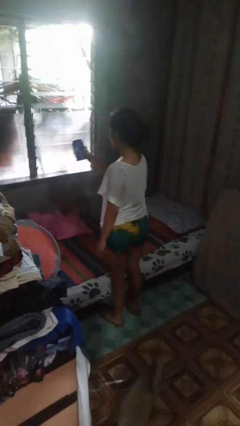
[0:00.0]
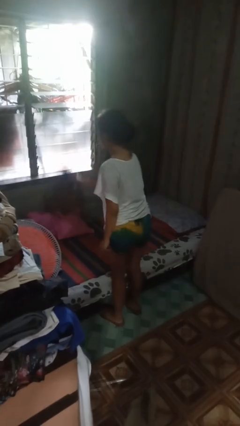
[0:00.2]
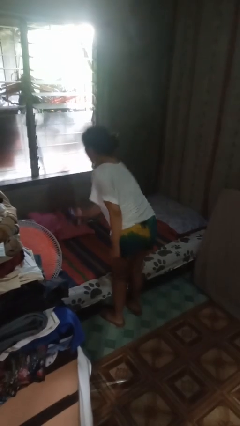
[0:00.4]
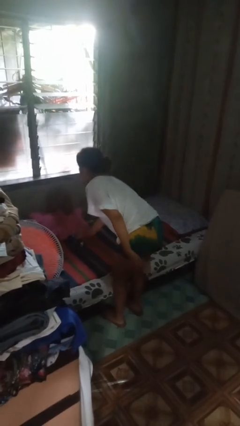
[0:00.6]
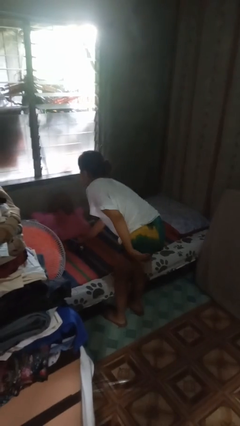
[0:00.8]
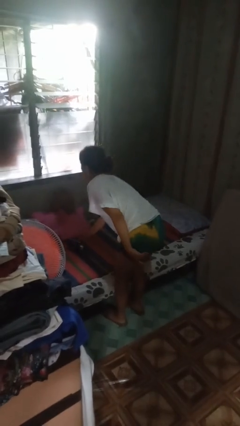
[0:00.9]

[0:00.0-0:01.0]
person puts down object on bed

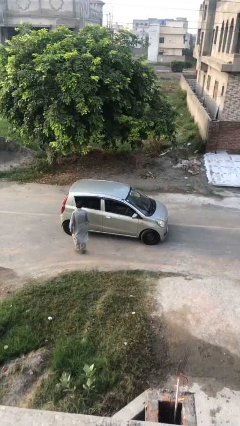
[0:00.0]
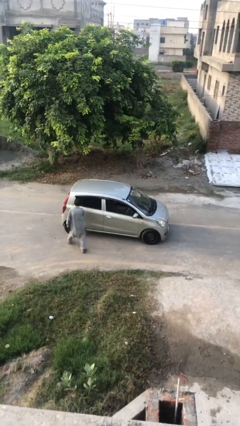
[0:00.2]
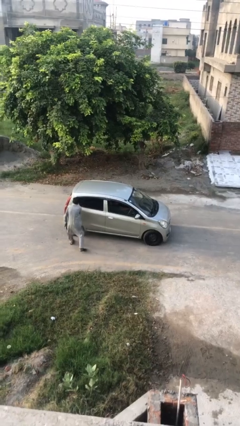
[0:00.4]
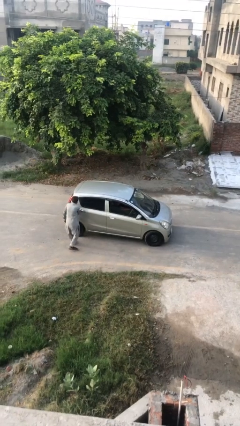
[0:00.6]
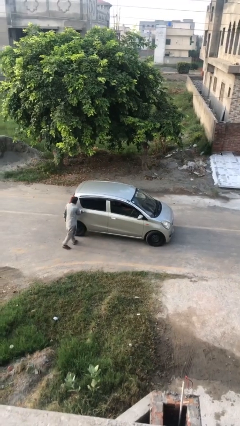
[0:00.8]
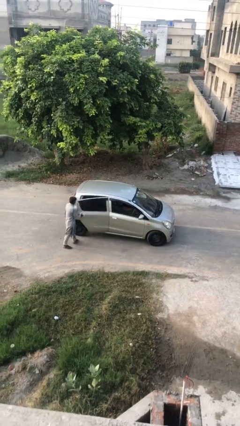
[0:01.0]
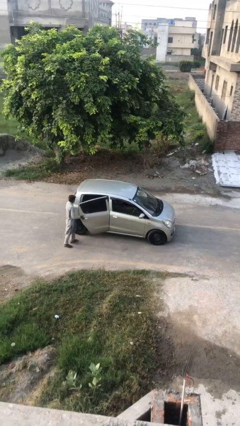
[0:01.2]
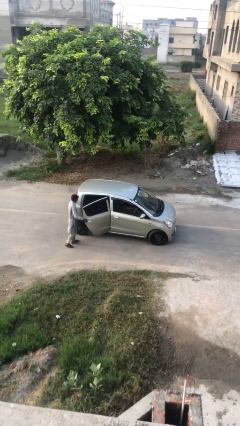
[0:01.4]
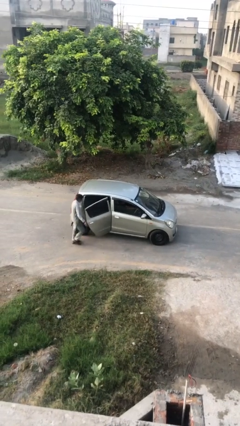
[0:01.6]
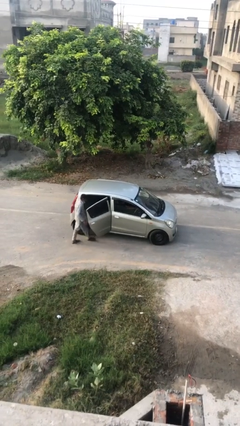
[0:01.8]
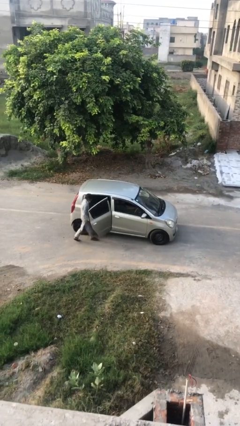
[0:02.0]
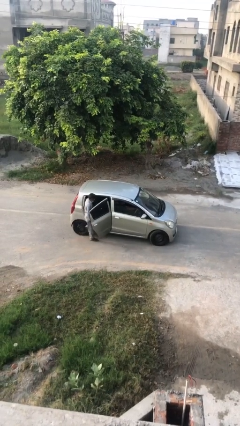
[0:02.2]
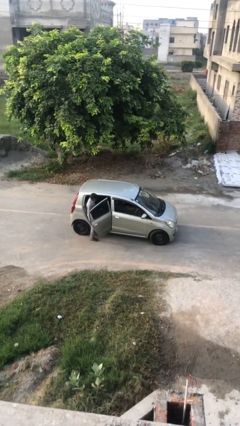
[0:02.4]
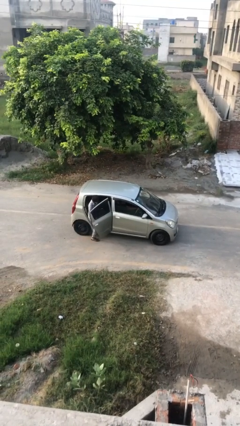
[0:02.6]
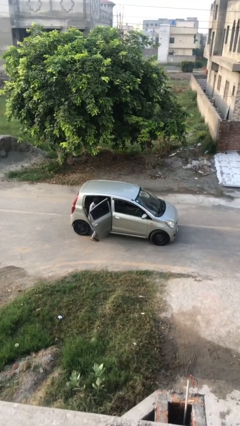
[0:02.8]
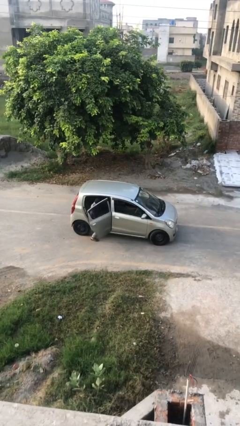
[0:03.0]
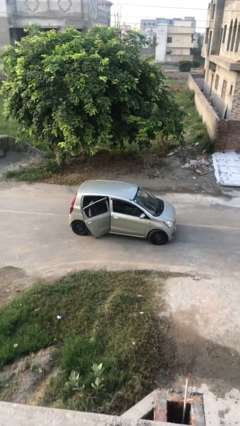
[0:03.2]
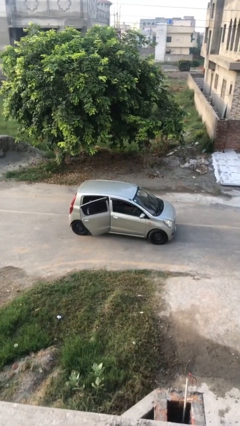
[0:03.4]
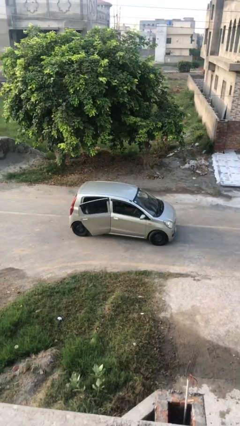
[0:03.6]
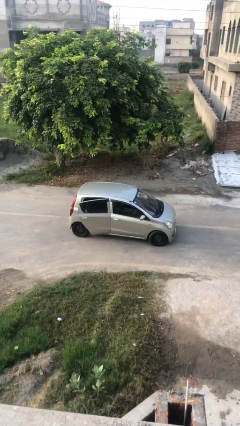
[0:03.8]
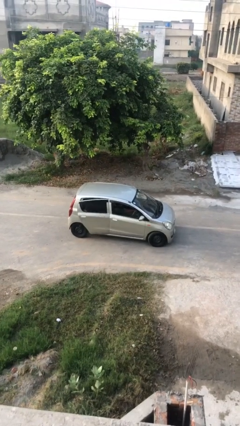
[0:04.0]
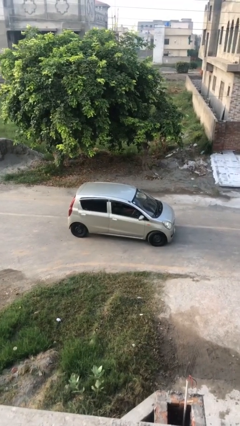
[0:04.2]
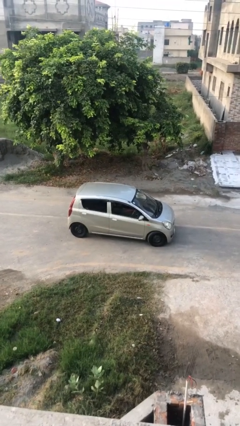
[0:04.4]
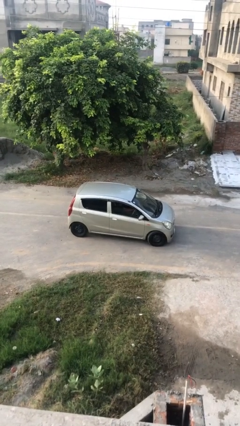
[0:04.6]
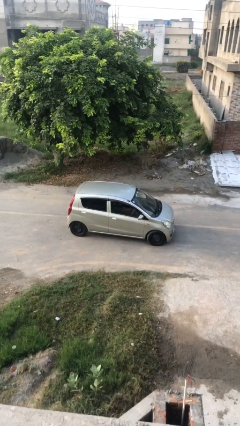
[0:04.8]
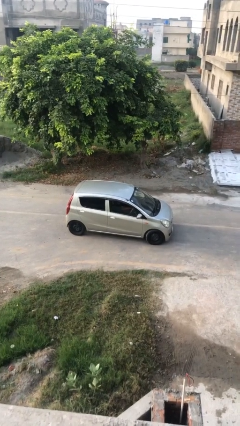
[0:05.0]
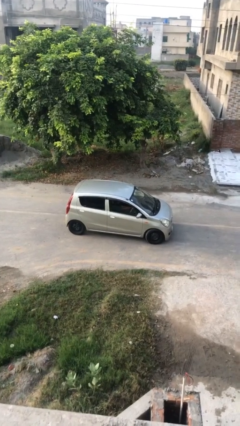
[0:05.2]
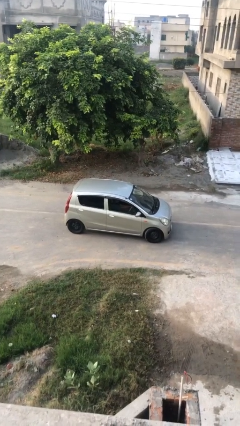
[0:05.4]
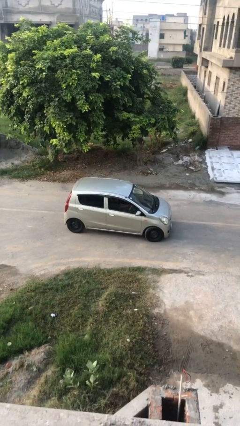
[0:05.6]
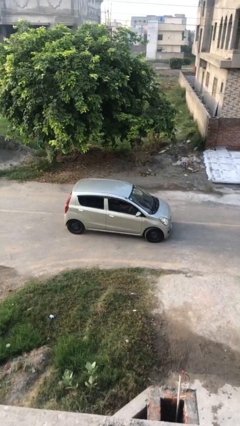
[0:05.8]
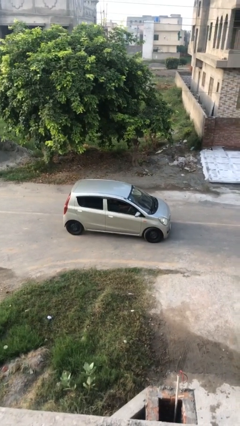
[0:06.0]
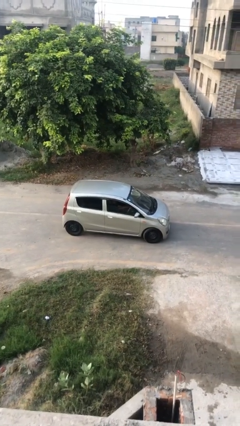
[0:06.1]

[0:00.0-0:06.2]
car picks up person

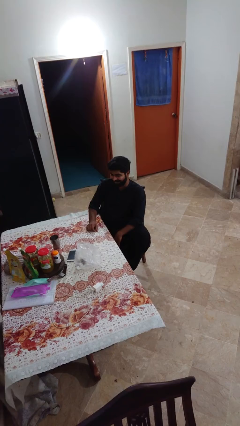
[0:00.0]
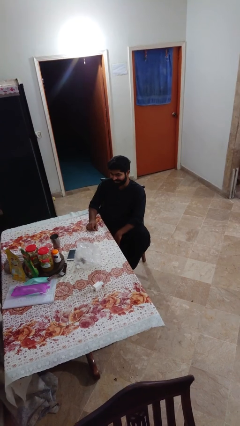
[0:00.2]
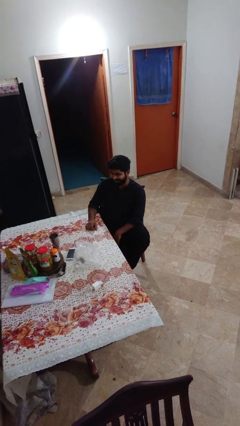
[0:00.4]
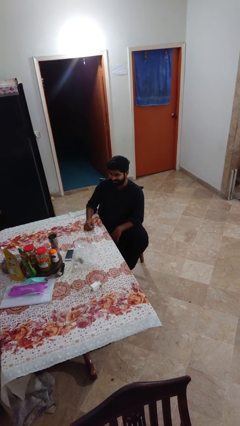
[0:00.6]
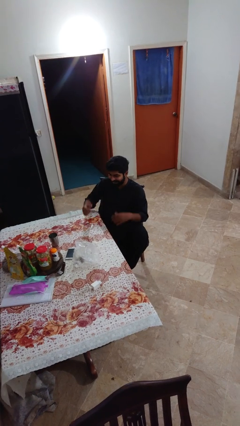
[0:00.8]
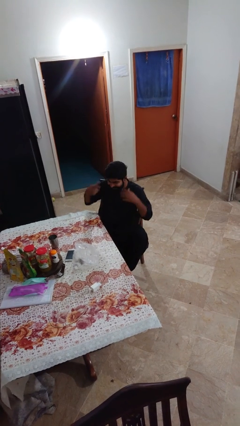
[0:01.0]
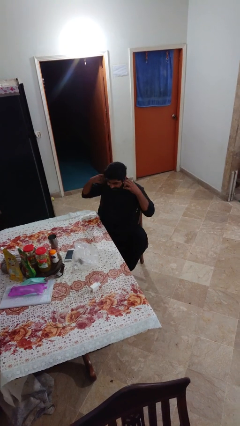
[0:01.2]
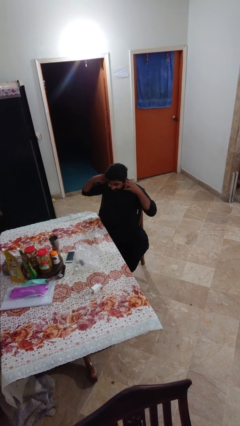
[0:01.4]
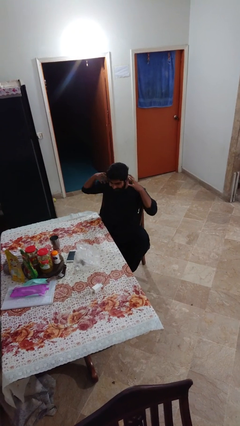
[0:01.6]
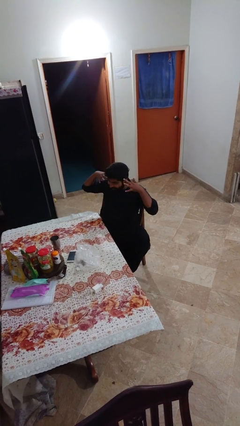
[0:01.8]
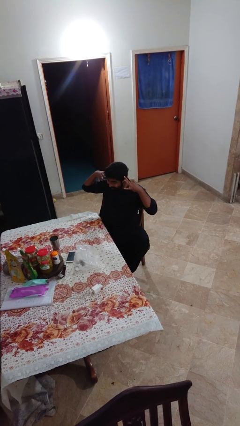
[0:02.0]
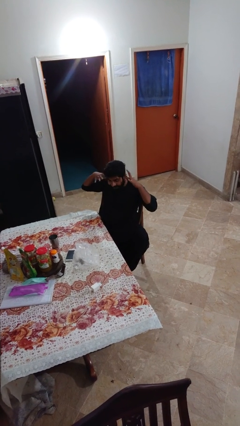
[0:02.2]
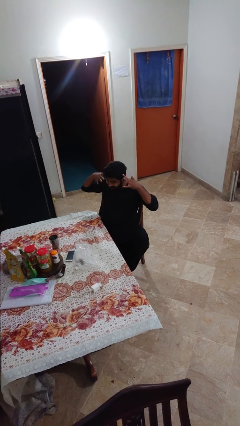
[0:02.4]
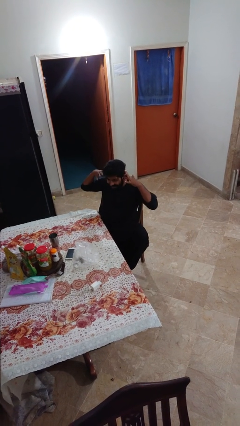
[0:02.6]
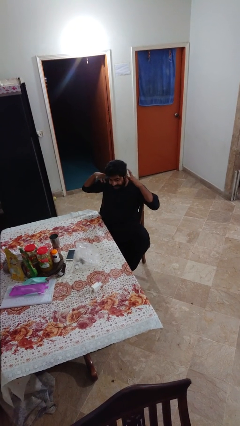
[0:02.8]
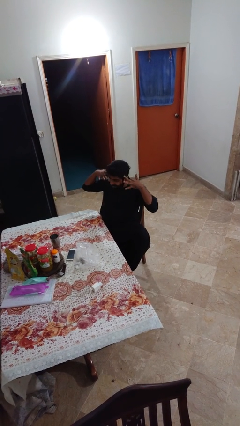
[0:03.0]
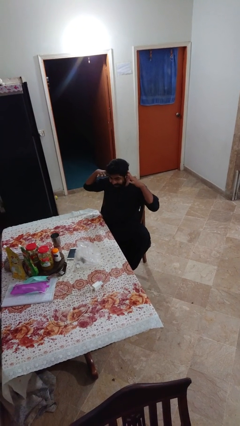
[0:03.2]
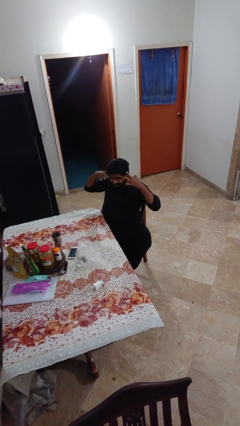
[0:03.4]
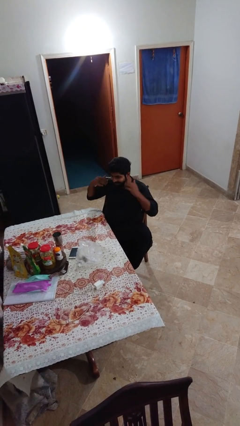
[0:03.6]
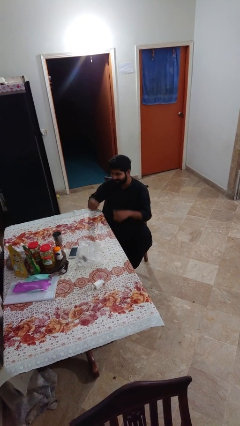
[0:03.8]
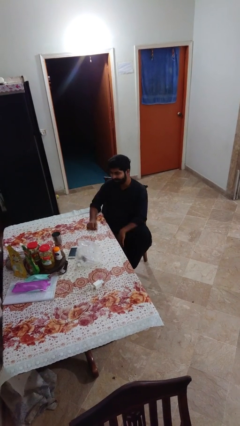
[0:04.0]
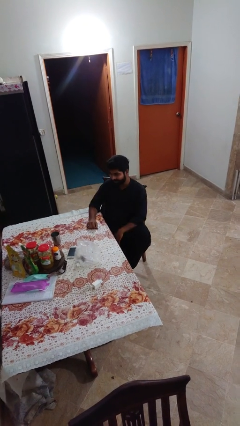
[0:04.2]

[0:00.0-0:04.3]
person puts fingers in ear

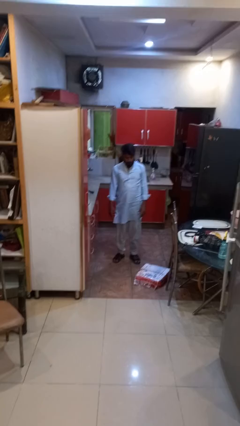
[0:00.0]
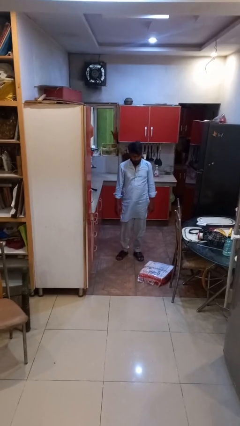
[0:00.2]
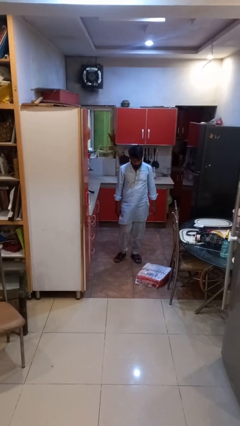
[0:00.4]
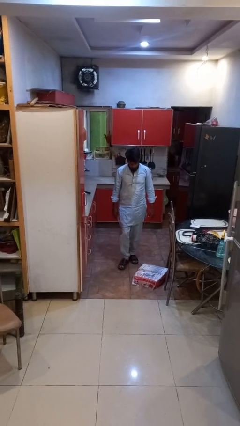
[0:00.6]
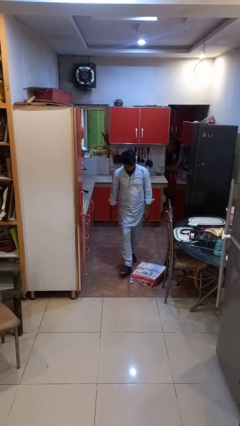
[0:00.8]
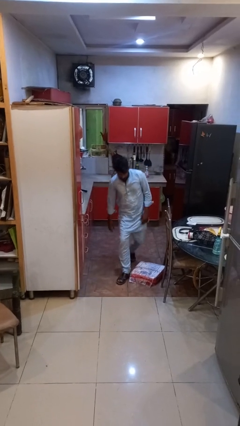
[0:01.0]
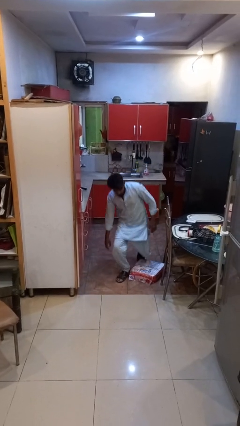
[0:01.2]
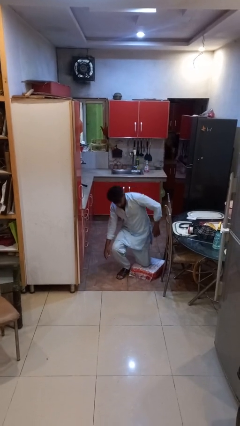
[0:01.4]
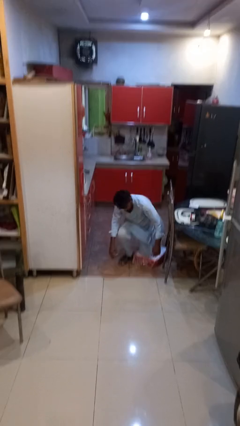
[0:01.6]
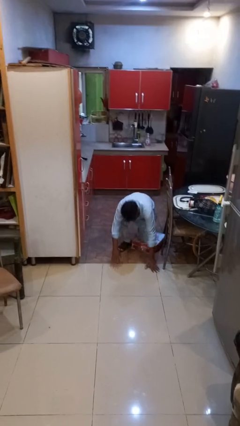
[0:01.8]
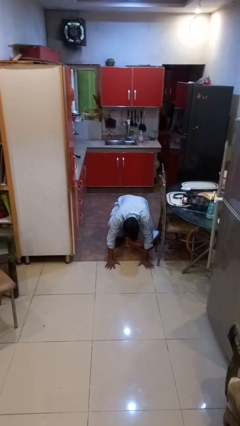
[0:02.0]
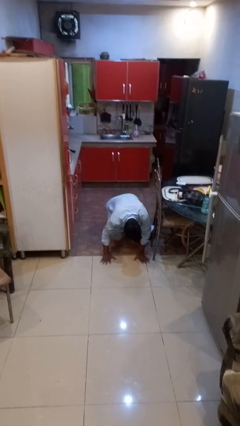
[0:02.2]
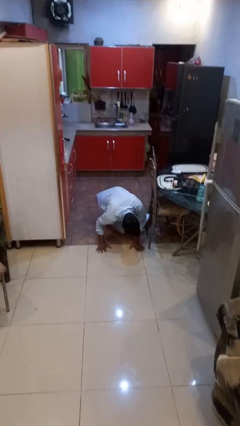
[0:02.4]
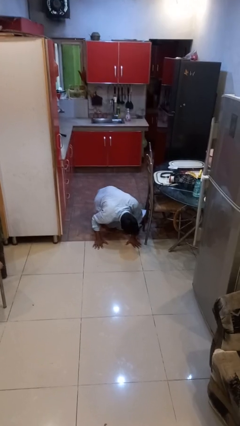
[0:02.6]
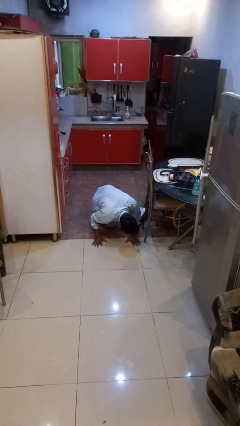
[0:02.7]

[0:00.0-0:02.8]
person trips on object on floor

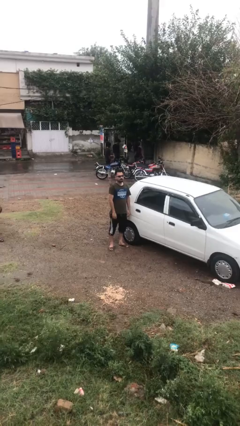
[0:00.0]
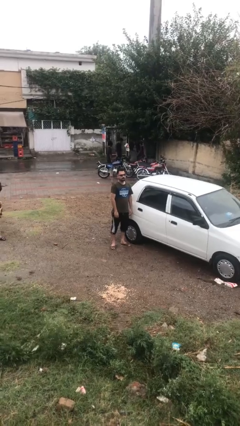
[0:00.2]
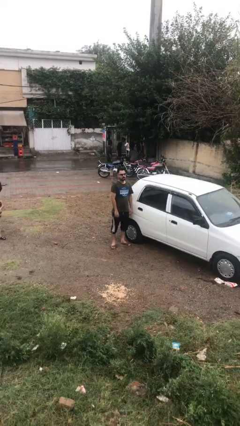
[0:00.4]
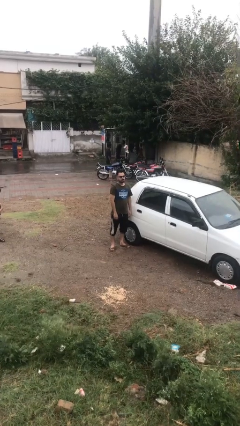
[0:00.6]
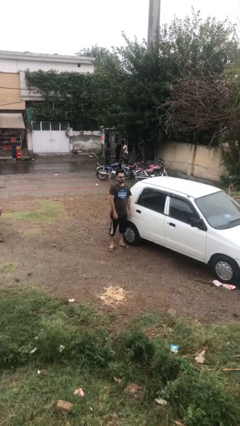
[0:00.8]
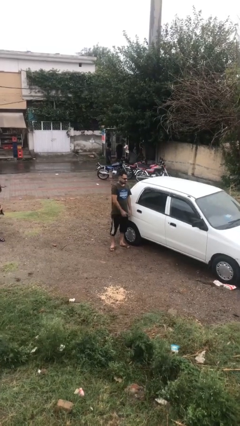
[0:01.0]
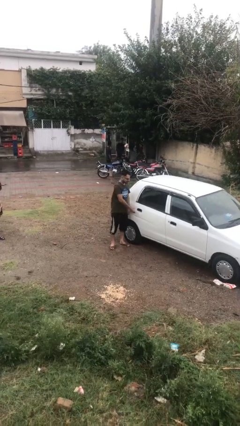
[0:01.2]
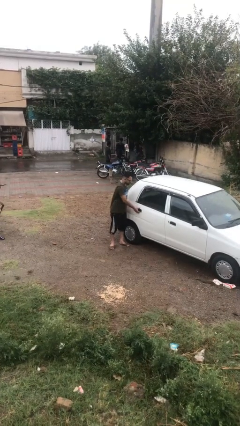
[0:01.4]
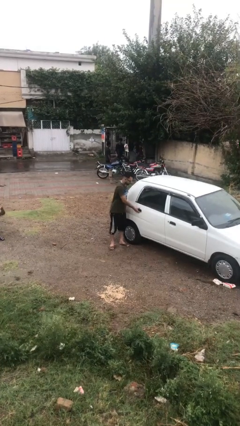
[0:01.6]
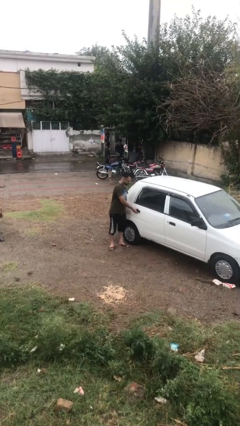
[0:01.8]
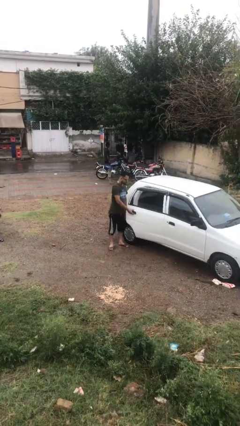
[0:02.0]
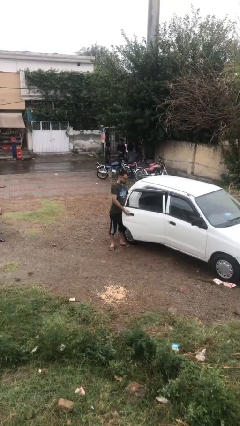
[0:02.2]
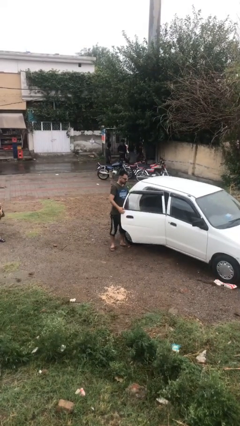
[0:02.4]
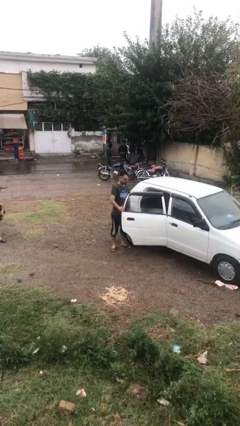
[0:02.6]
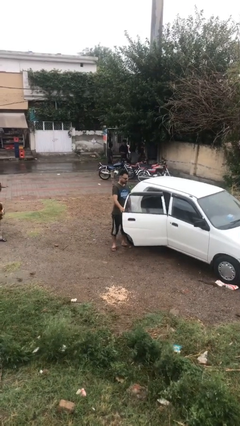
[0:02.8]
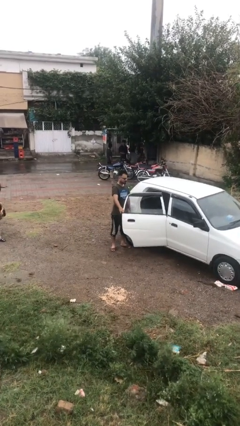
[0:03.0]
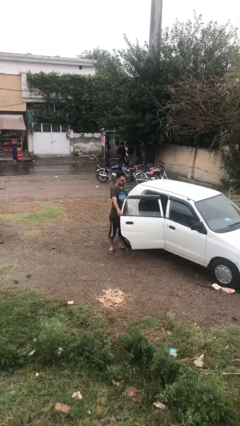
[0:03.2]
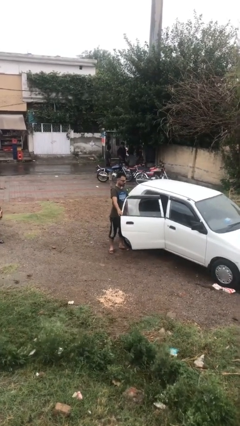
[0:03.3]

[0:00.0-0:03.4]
person opens car door

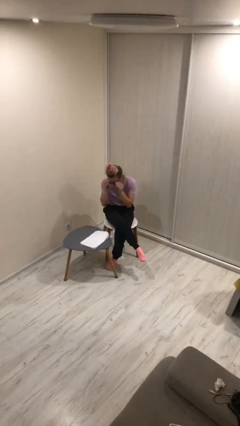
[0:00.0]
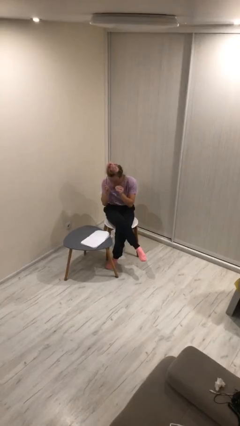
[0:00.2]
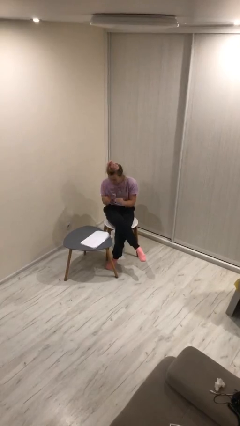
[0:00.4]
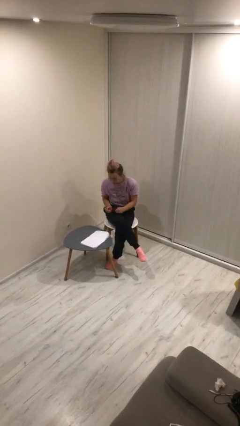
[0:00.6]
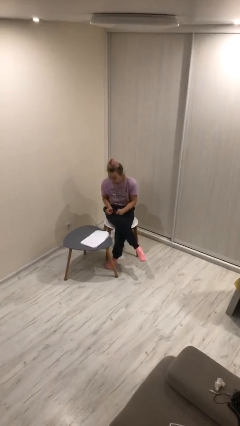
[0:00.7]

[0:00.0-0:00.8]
person takes off glasses
